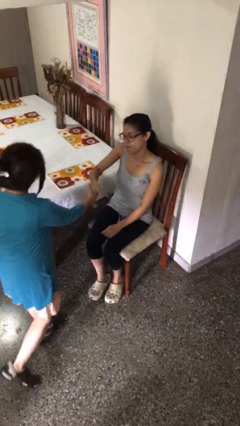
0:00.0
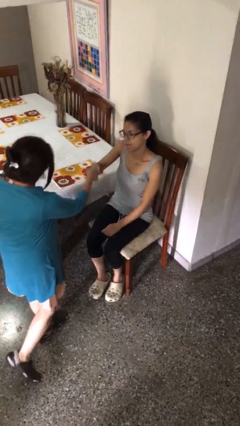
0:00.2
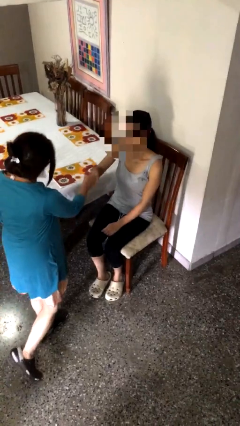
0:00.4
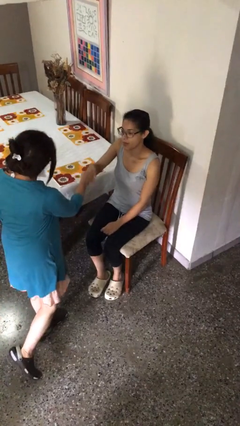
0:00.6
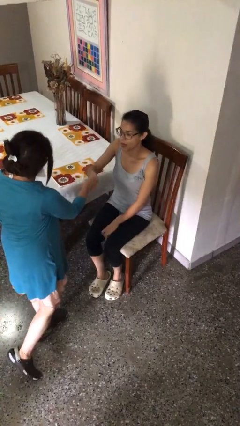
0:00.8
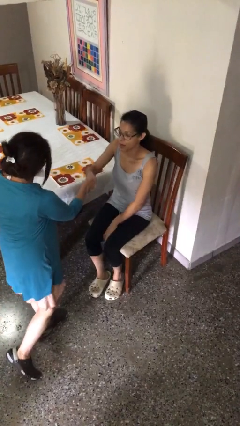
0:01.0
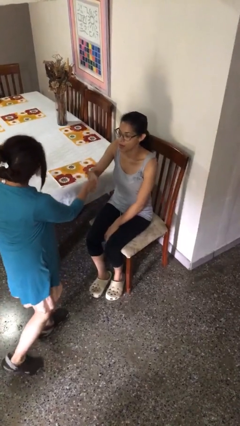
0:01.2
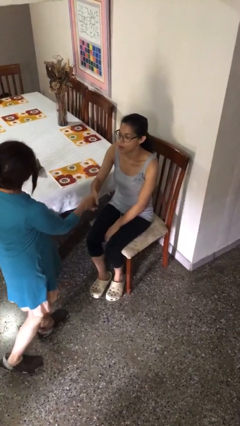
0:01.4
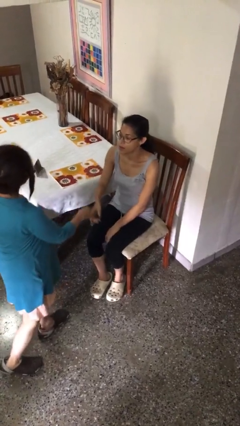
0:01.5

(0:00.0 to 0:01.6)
person shakes hand

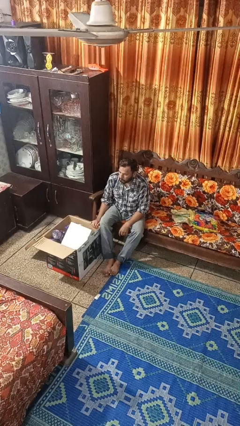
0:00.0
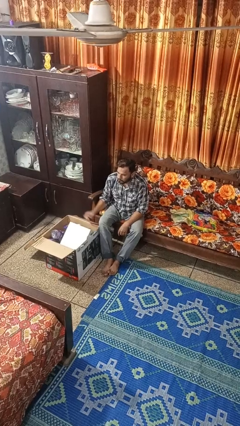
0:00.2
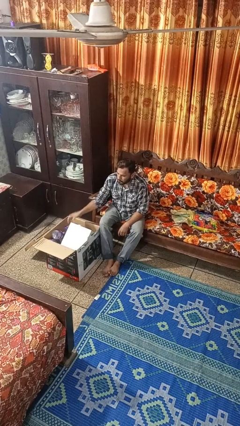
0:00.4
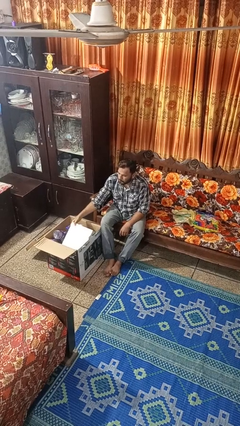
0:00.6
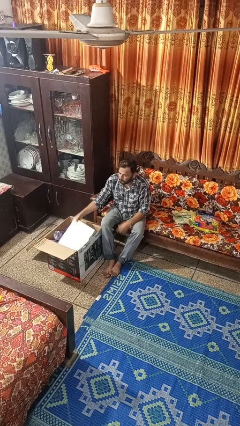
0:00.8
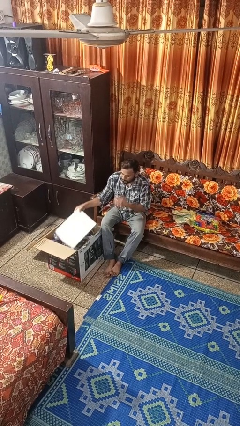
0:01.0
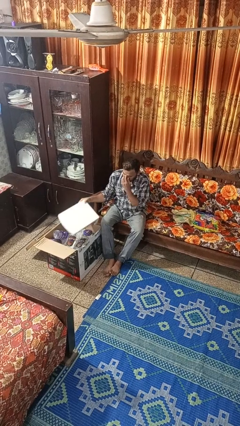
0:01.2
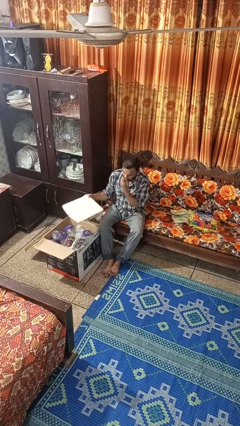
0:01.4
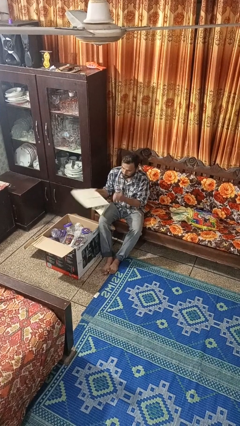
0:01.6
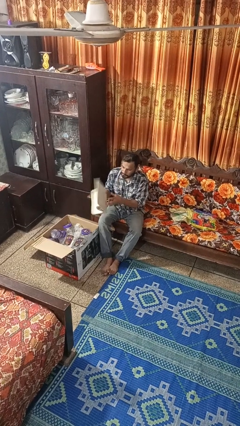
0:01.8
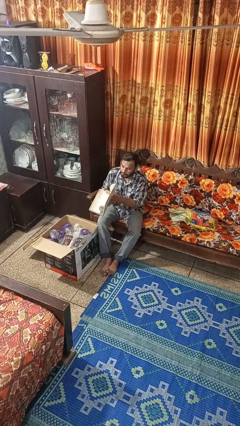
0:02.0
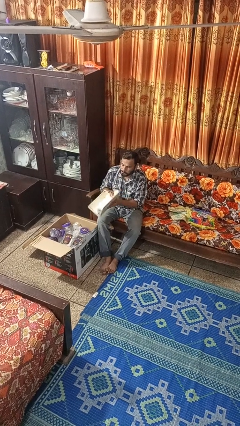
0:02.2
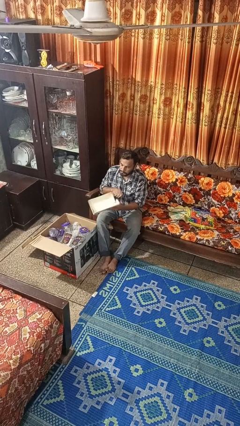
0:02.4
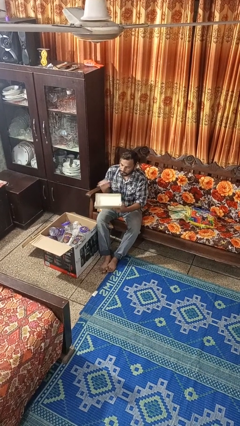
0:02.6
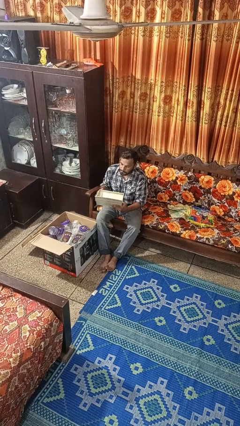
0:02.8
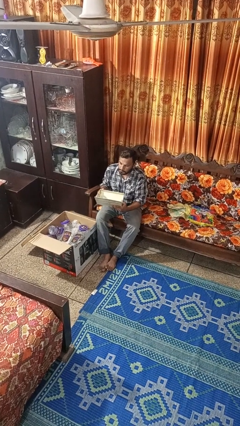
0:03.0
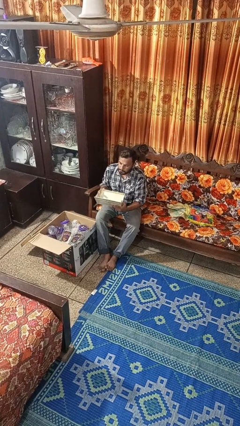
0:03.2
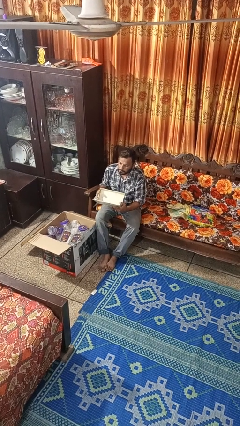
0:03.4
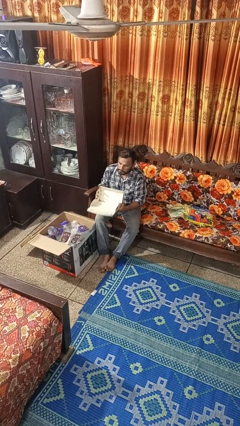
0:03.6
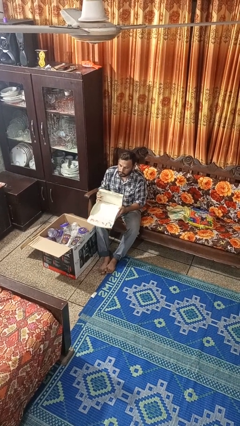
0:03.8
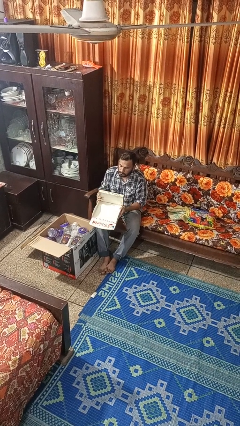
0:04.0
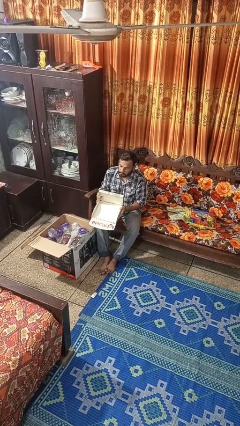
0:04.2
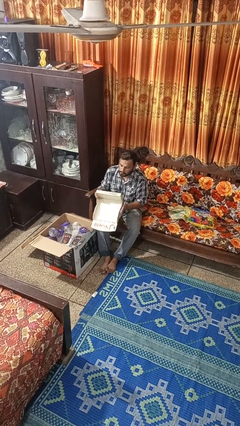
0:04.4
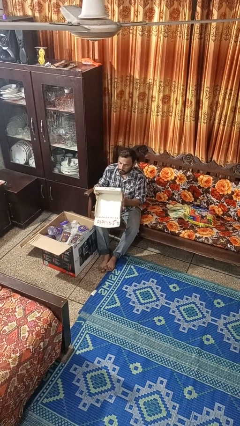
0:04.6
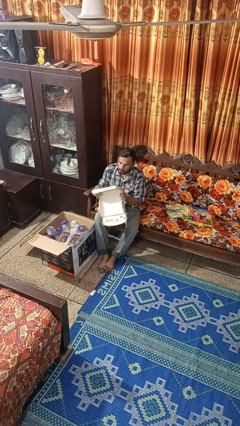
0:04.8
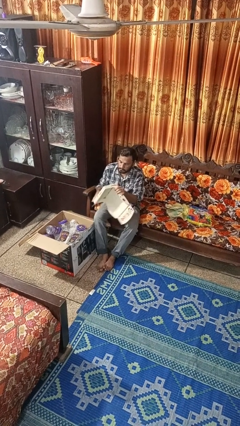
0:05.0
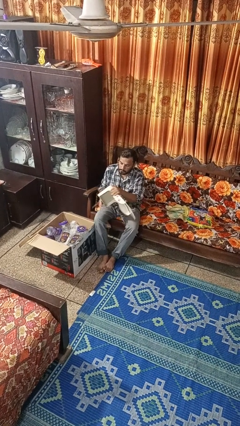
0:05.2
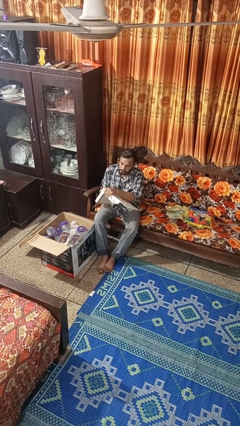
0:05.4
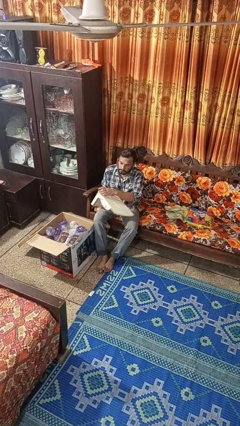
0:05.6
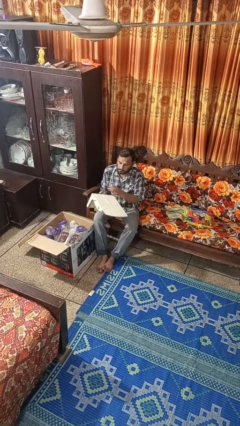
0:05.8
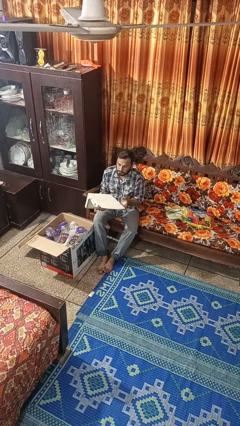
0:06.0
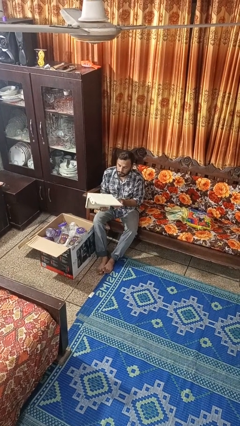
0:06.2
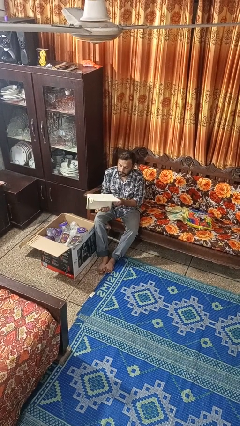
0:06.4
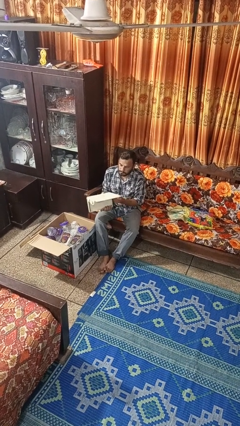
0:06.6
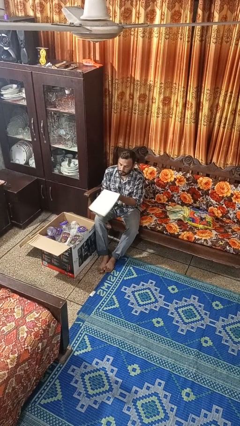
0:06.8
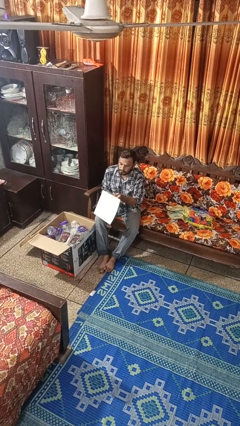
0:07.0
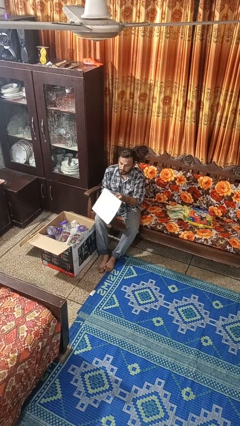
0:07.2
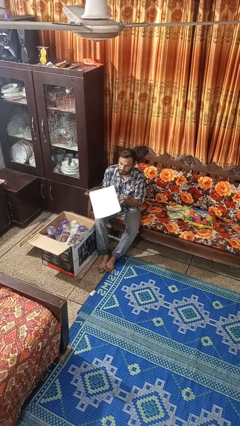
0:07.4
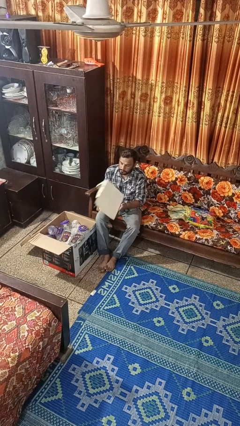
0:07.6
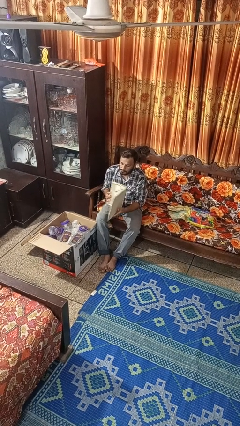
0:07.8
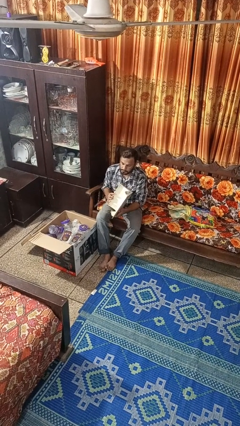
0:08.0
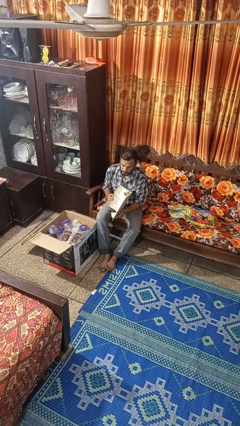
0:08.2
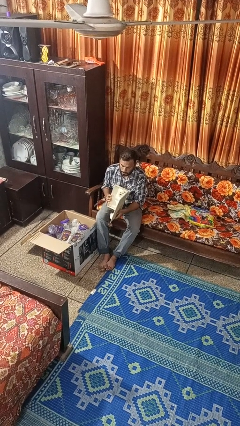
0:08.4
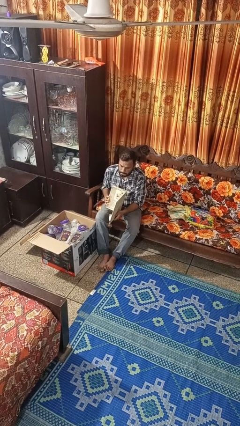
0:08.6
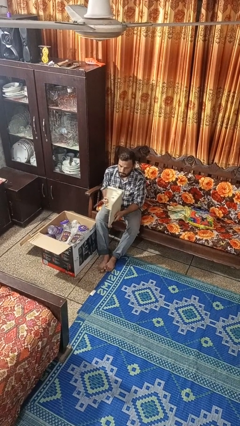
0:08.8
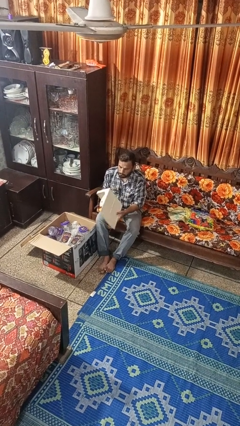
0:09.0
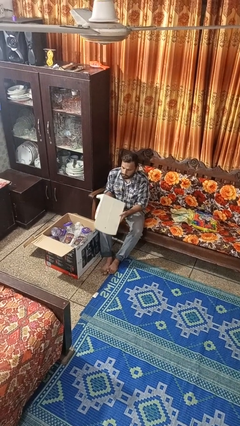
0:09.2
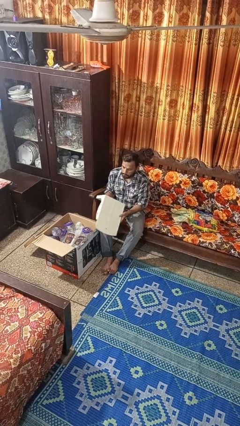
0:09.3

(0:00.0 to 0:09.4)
person takes object from box

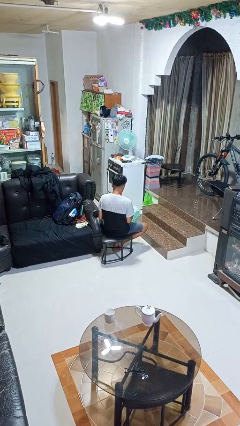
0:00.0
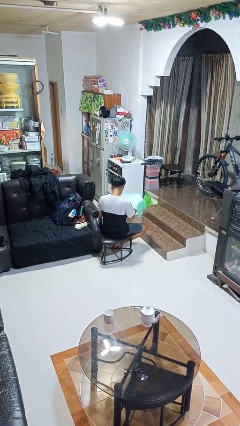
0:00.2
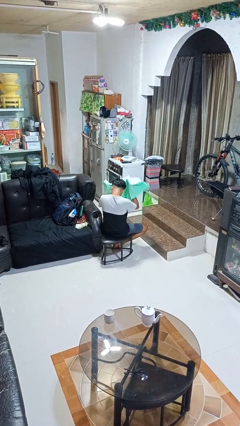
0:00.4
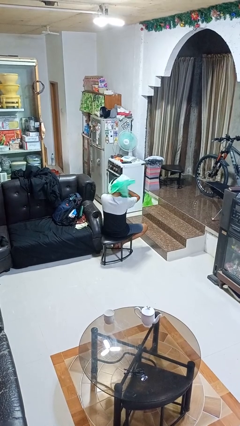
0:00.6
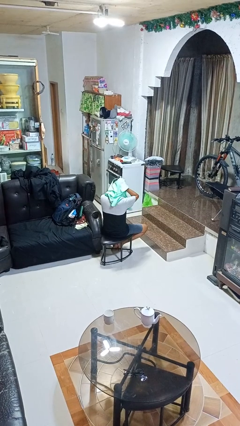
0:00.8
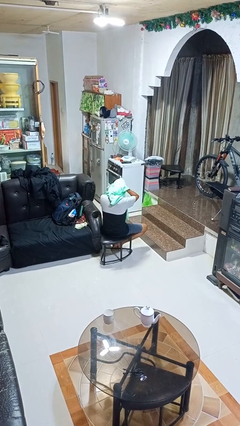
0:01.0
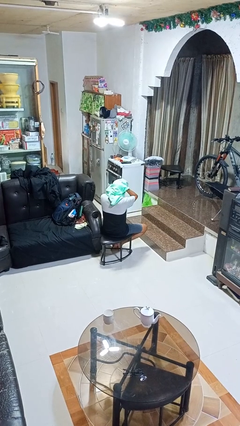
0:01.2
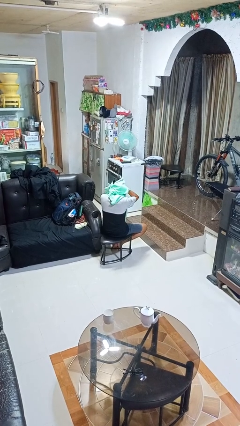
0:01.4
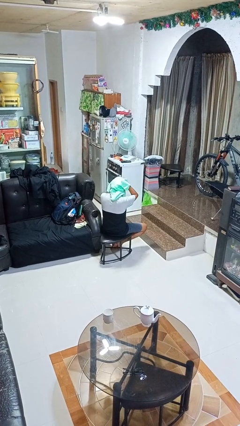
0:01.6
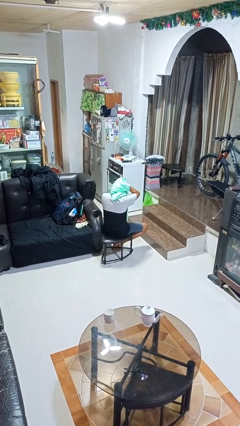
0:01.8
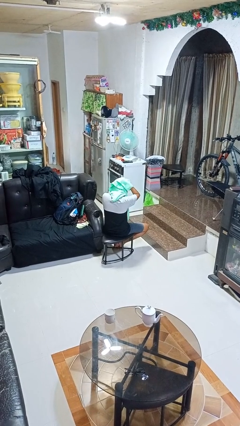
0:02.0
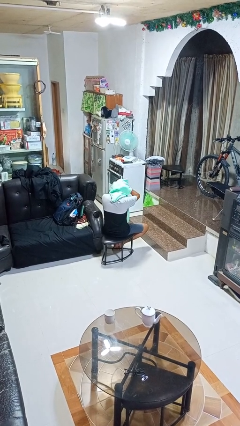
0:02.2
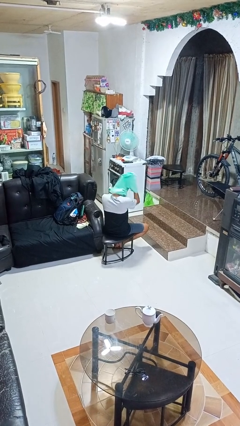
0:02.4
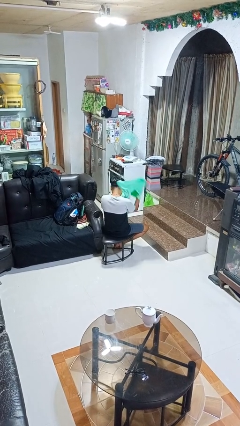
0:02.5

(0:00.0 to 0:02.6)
person dries hair with towel

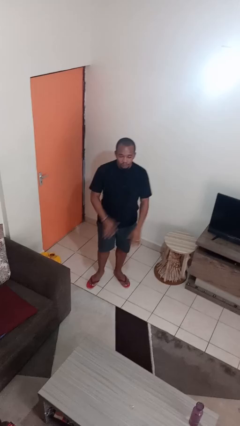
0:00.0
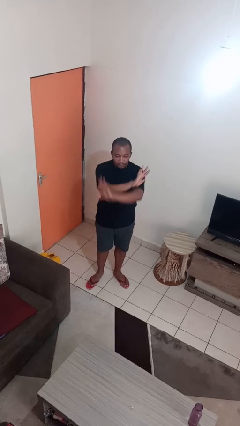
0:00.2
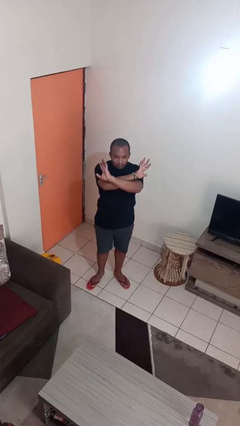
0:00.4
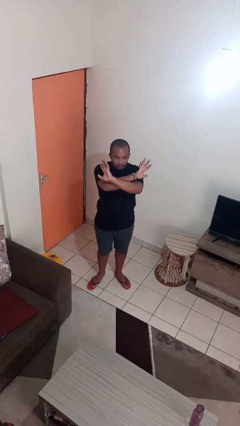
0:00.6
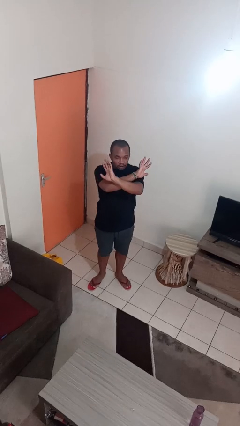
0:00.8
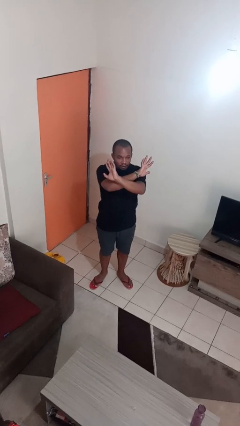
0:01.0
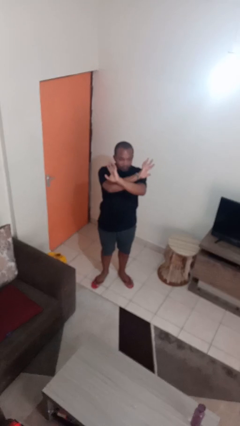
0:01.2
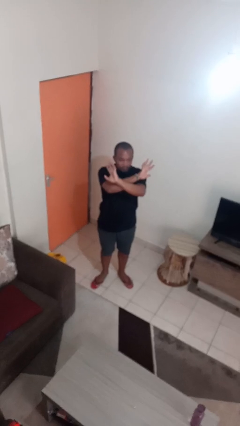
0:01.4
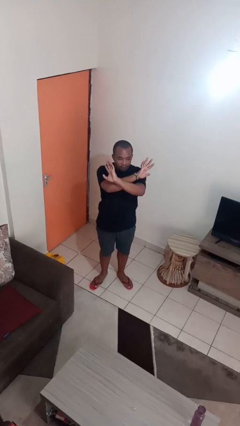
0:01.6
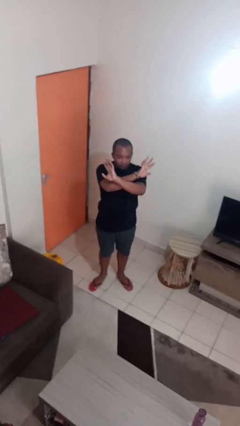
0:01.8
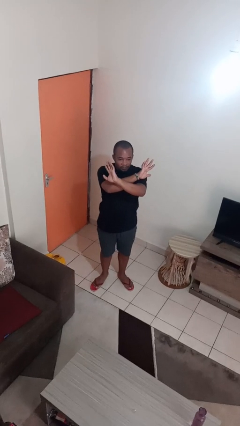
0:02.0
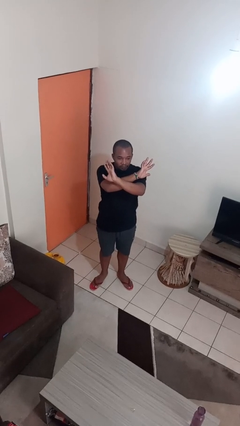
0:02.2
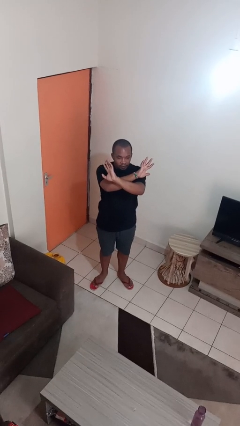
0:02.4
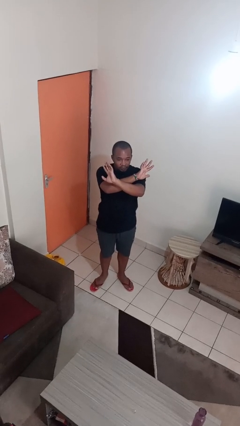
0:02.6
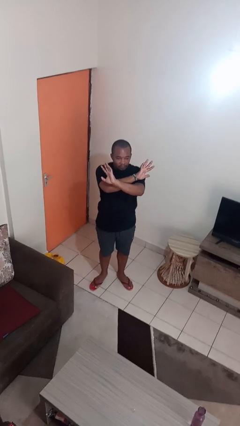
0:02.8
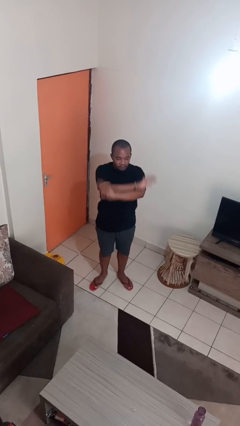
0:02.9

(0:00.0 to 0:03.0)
person gestures arms x

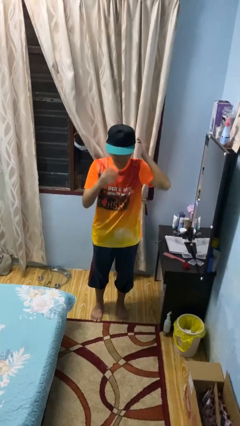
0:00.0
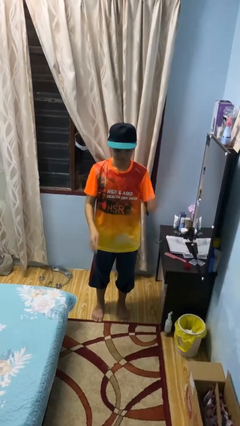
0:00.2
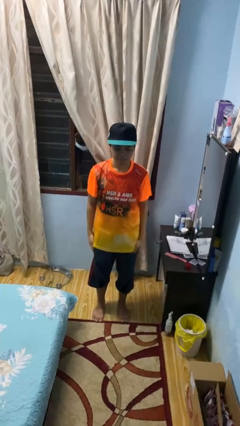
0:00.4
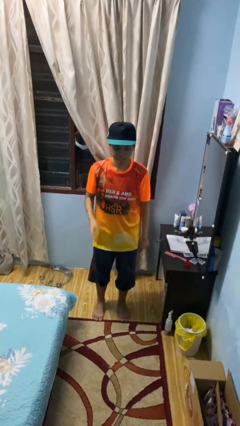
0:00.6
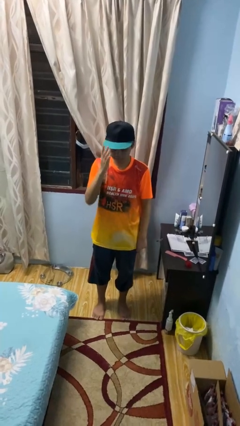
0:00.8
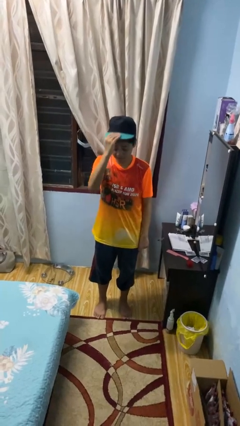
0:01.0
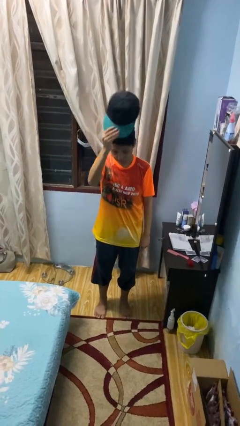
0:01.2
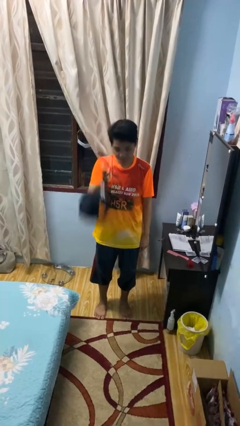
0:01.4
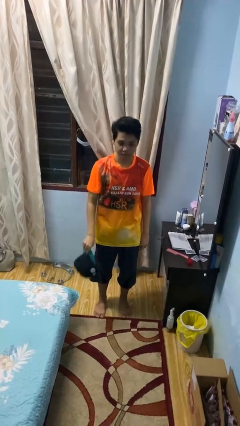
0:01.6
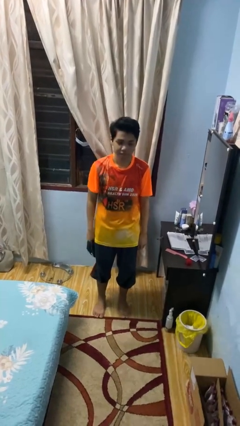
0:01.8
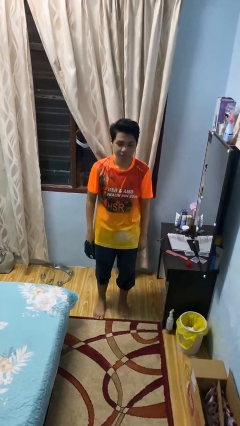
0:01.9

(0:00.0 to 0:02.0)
person takes off hat
